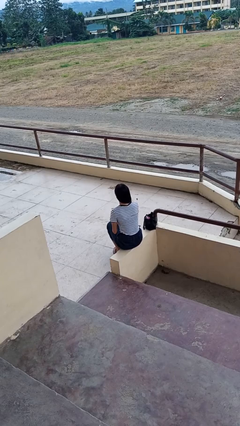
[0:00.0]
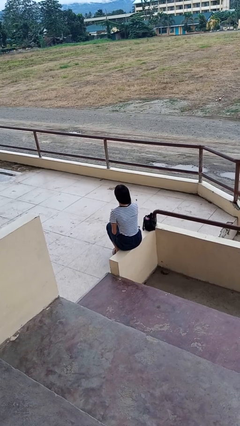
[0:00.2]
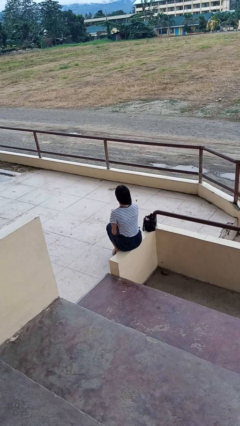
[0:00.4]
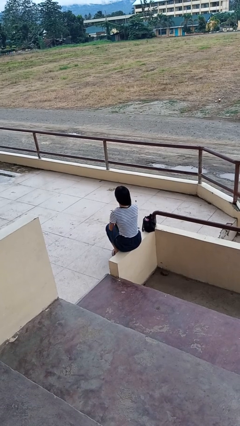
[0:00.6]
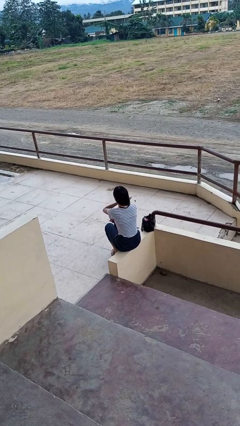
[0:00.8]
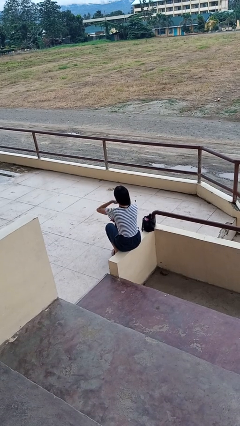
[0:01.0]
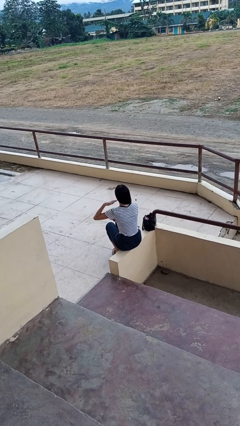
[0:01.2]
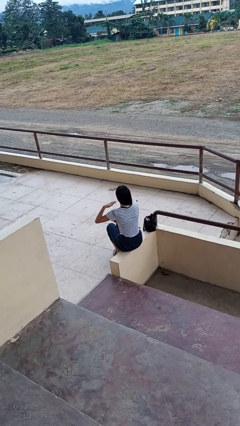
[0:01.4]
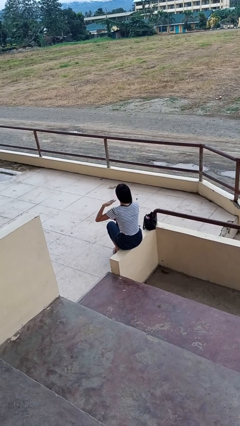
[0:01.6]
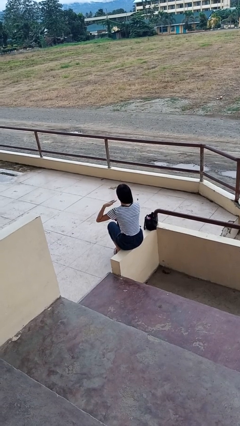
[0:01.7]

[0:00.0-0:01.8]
person gestures cut

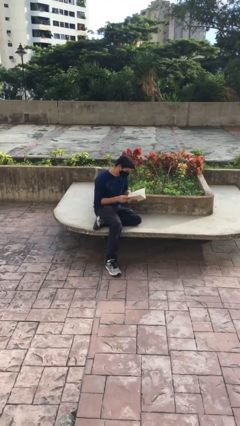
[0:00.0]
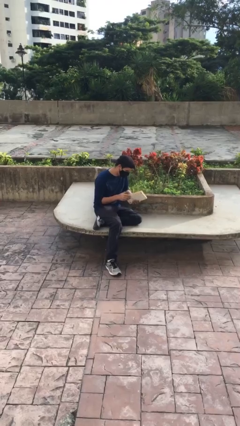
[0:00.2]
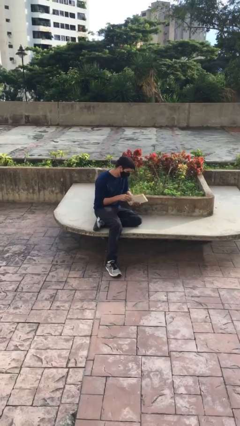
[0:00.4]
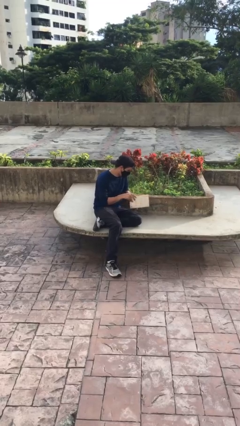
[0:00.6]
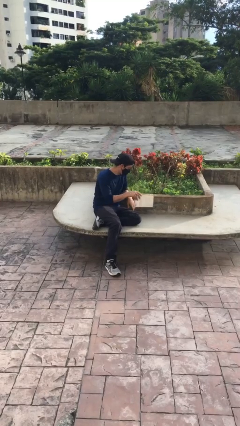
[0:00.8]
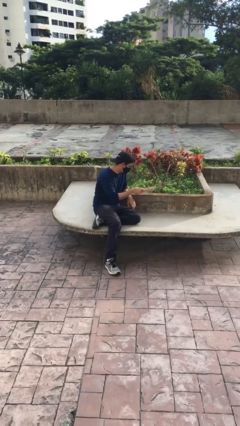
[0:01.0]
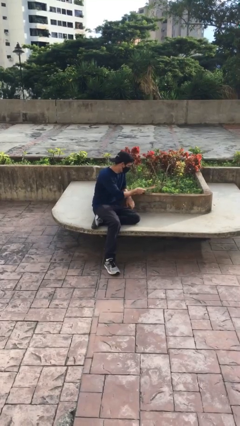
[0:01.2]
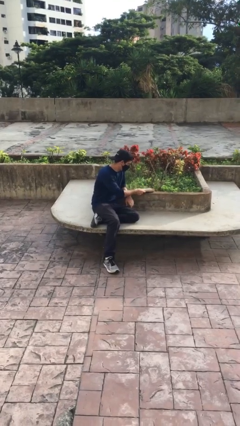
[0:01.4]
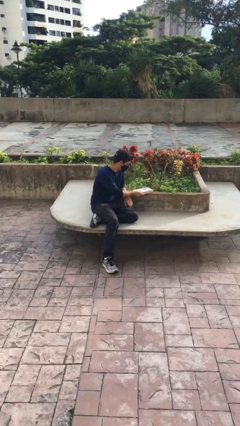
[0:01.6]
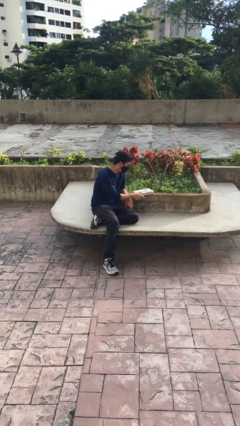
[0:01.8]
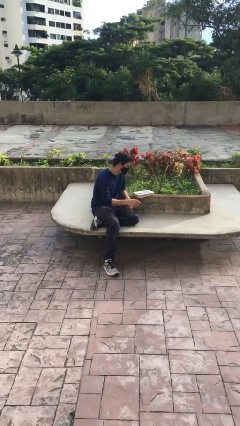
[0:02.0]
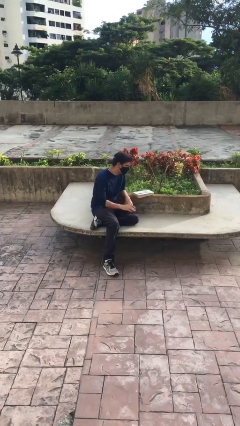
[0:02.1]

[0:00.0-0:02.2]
person puts down object on table

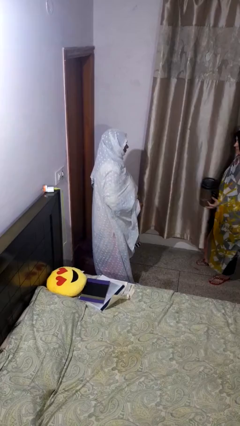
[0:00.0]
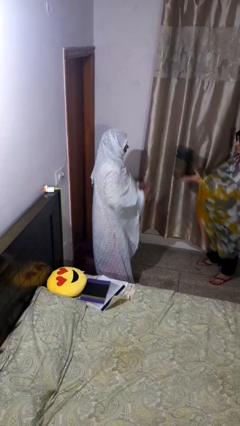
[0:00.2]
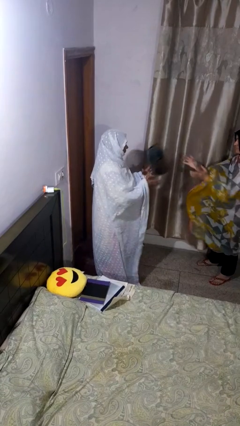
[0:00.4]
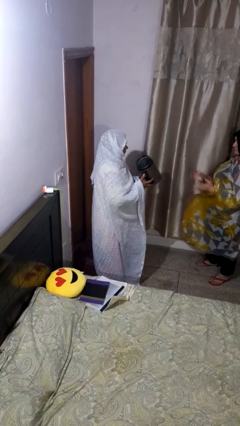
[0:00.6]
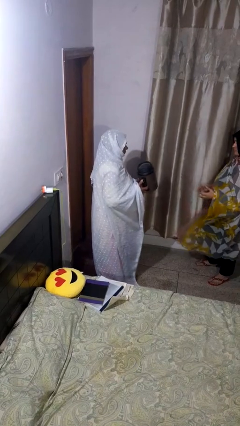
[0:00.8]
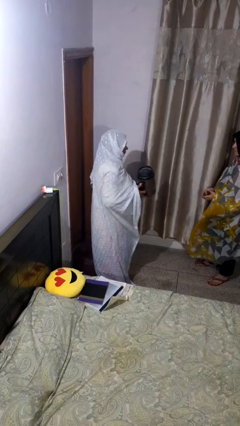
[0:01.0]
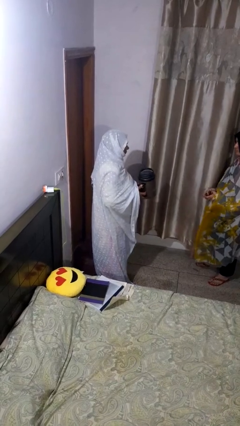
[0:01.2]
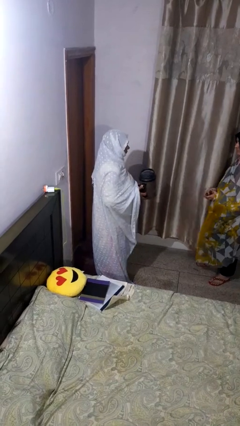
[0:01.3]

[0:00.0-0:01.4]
person catches object from person

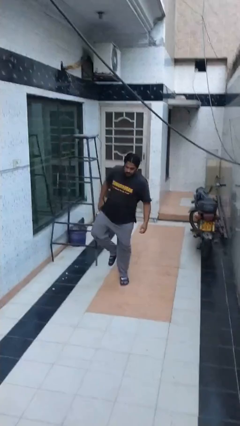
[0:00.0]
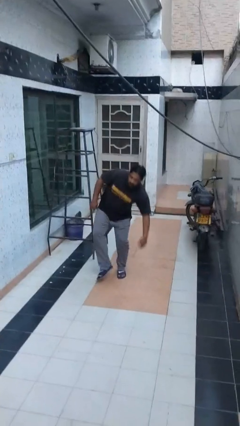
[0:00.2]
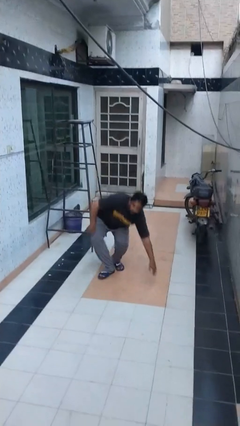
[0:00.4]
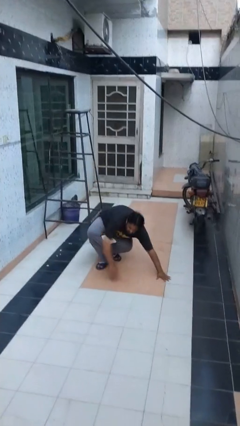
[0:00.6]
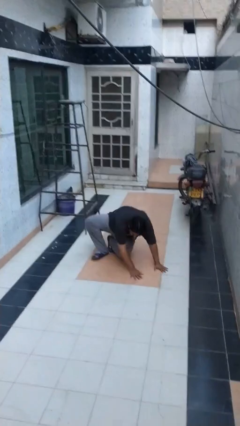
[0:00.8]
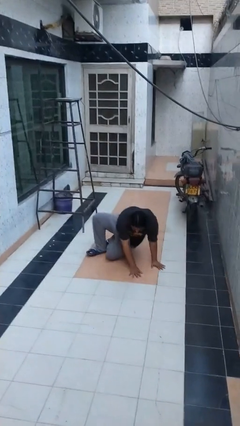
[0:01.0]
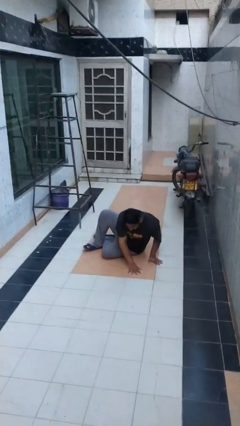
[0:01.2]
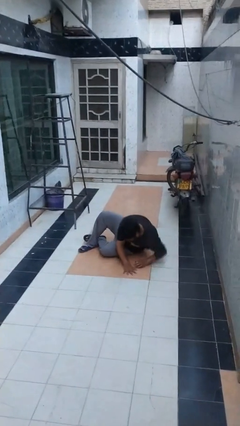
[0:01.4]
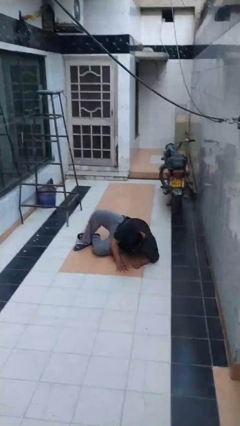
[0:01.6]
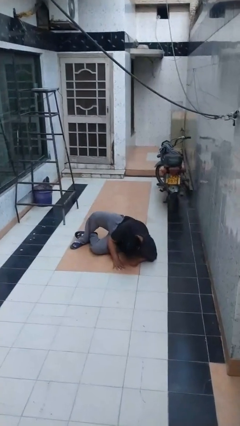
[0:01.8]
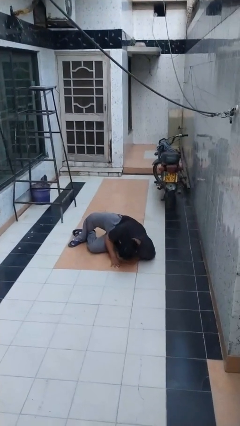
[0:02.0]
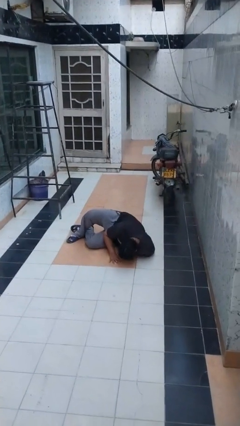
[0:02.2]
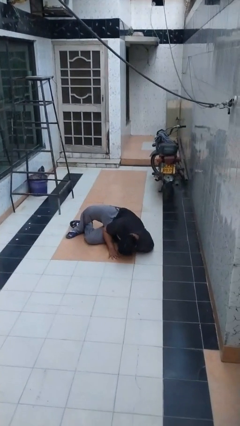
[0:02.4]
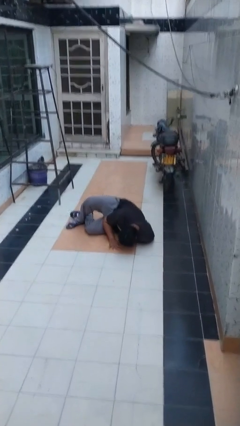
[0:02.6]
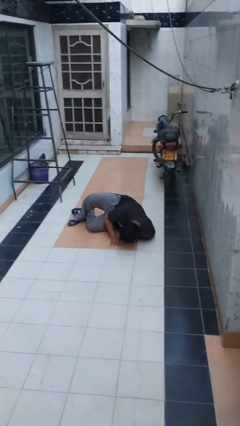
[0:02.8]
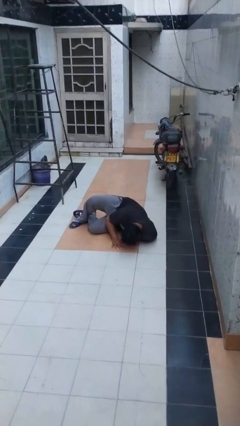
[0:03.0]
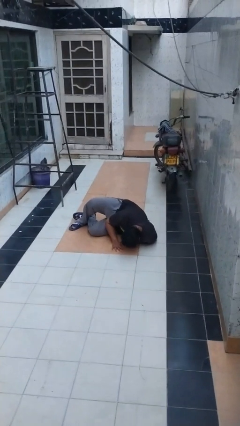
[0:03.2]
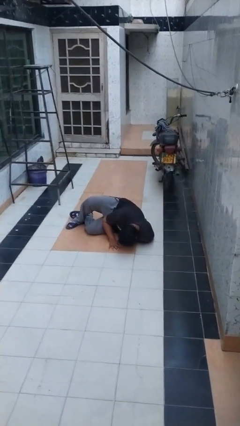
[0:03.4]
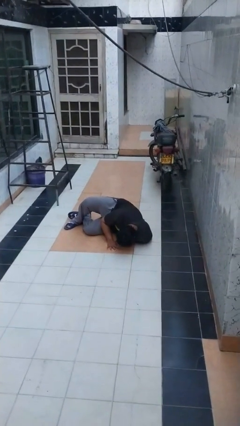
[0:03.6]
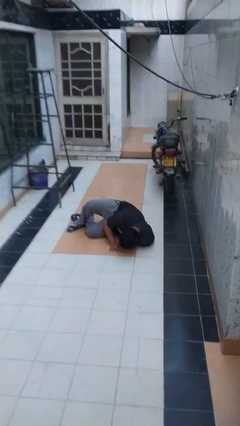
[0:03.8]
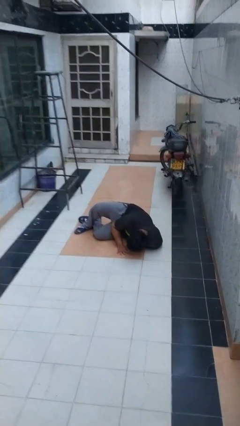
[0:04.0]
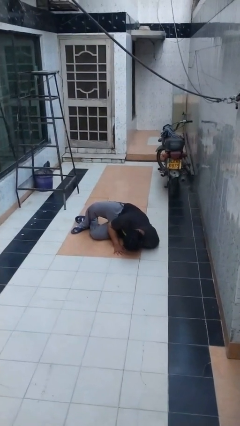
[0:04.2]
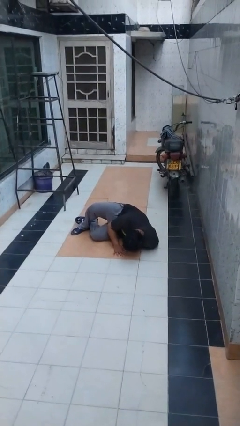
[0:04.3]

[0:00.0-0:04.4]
person lies down on floor

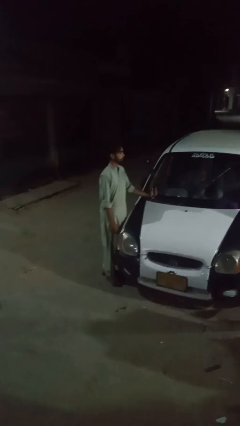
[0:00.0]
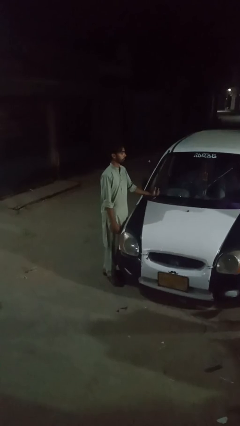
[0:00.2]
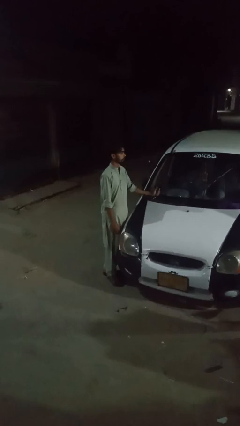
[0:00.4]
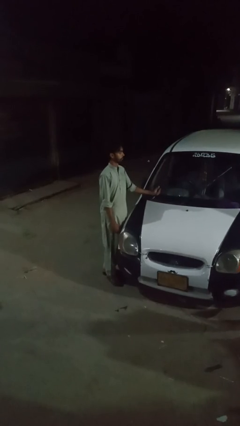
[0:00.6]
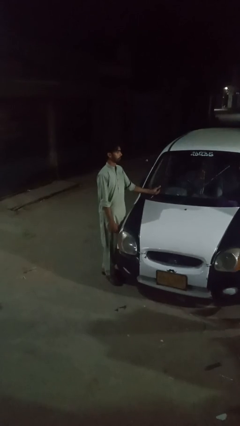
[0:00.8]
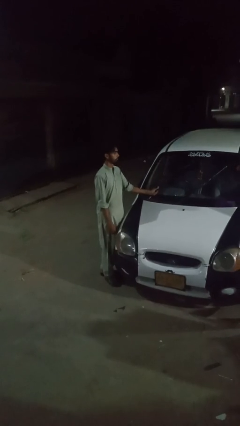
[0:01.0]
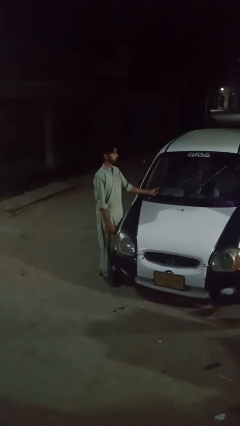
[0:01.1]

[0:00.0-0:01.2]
person flips down car wipers

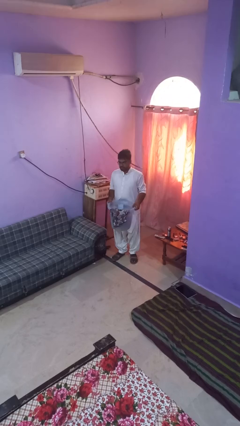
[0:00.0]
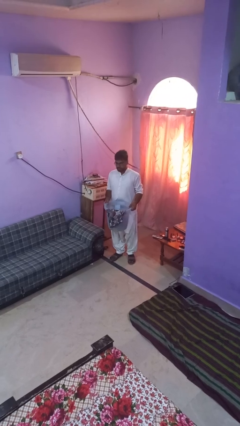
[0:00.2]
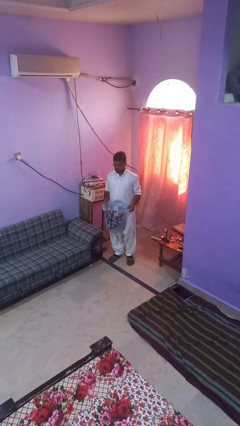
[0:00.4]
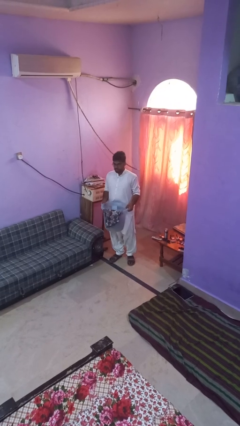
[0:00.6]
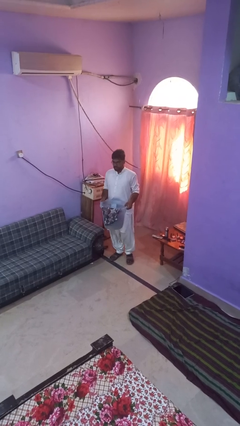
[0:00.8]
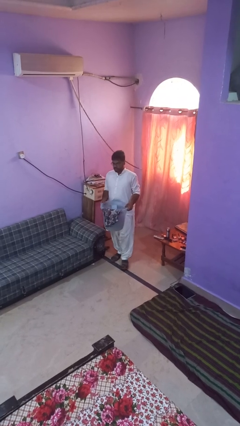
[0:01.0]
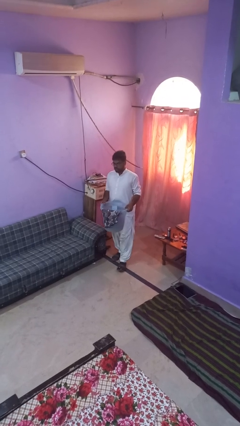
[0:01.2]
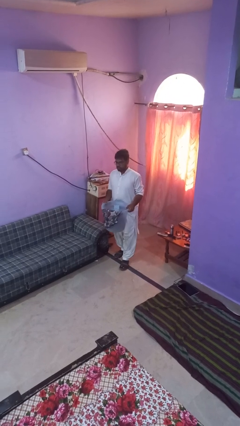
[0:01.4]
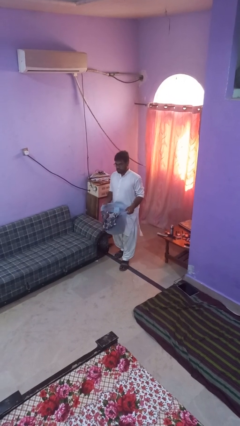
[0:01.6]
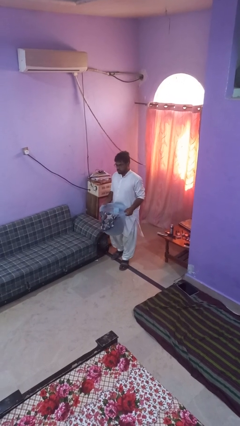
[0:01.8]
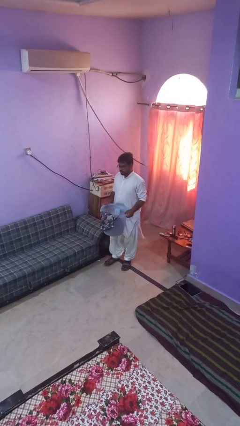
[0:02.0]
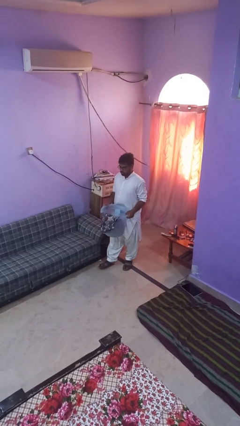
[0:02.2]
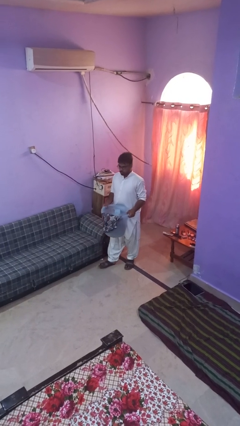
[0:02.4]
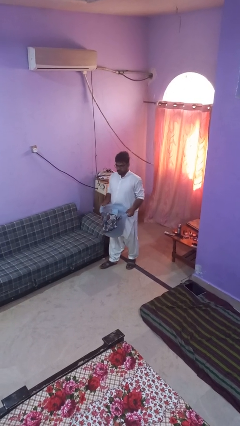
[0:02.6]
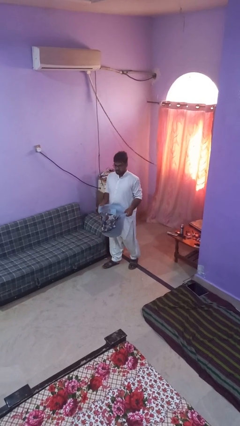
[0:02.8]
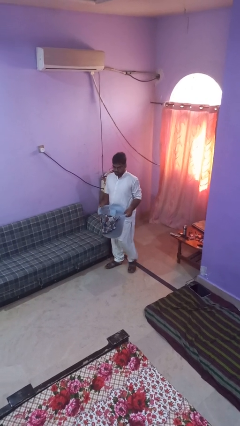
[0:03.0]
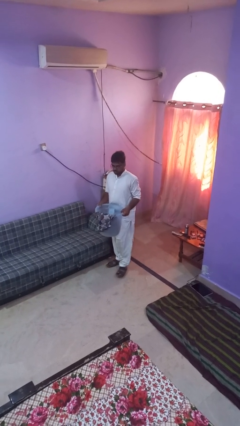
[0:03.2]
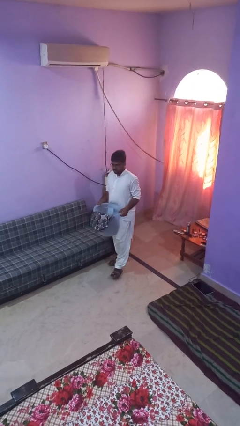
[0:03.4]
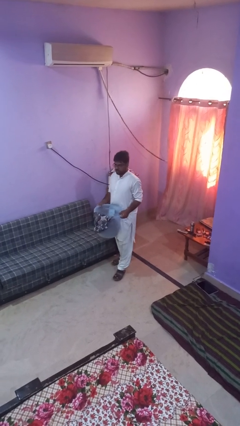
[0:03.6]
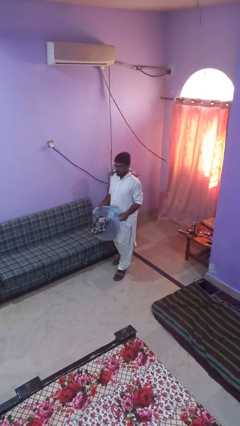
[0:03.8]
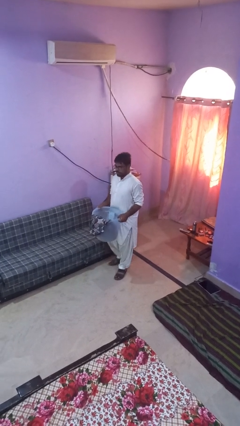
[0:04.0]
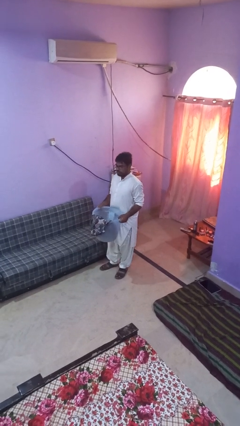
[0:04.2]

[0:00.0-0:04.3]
person carries laundry basket

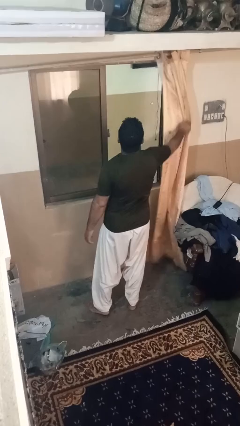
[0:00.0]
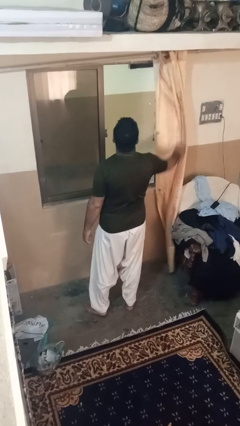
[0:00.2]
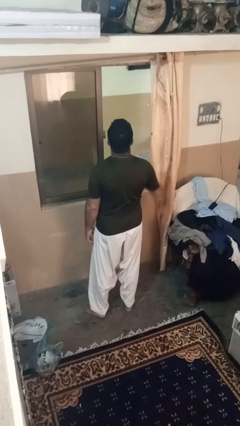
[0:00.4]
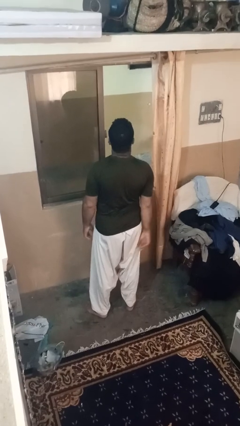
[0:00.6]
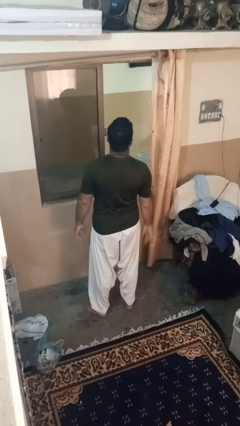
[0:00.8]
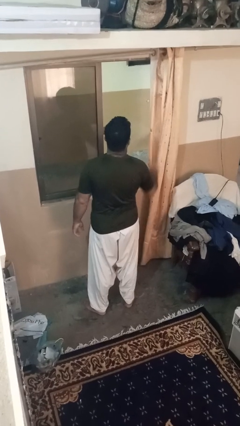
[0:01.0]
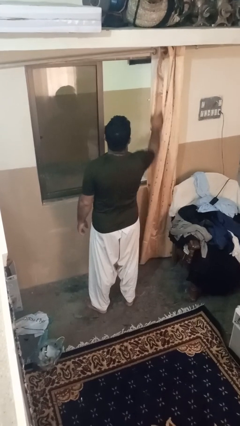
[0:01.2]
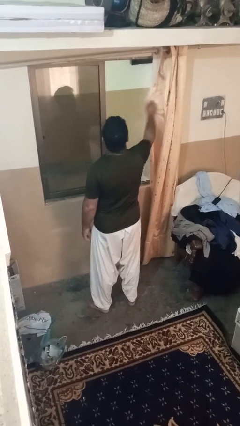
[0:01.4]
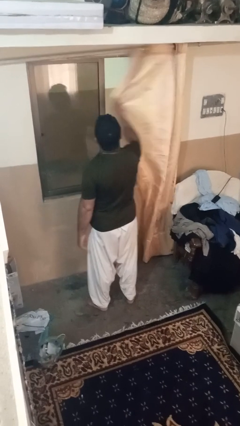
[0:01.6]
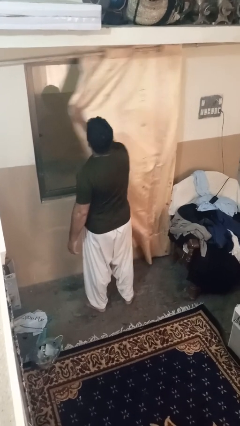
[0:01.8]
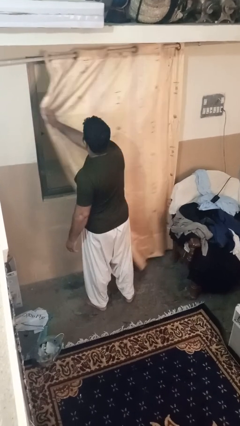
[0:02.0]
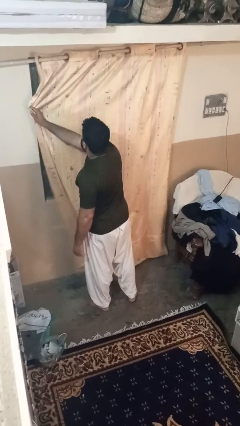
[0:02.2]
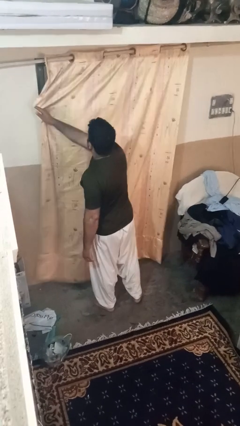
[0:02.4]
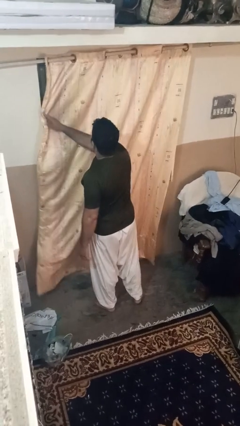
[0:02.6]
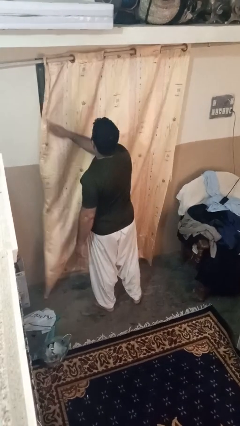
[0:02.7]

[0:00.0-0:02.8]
person closes curtains
